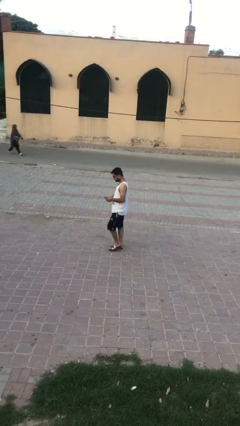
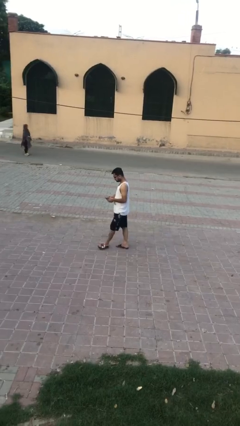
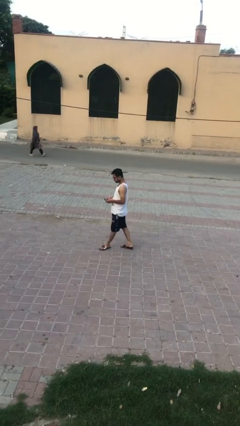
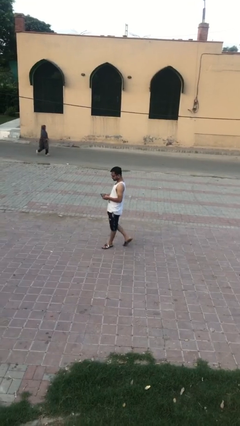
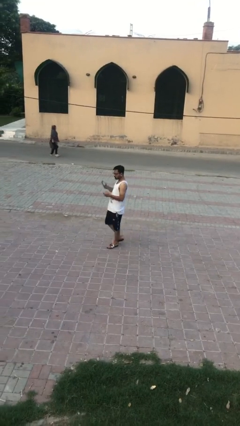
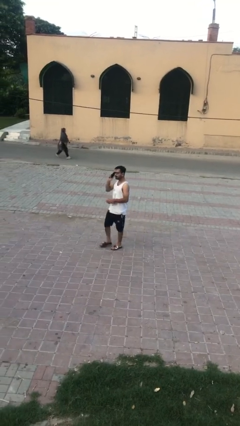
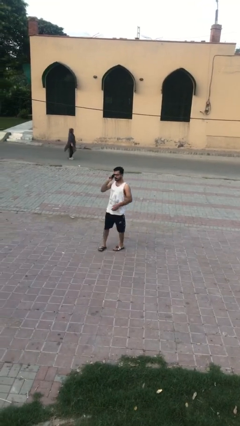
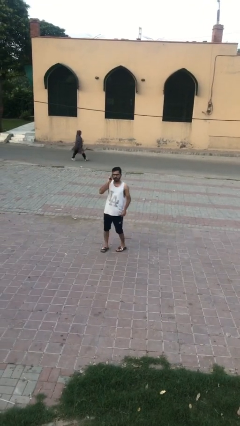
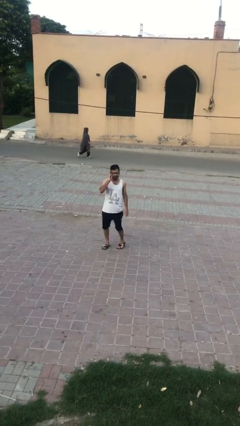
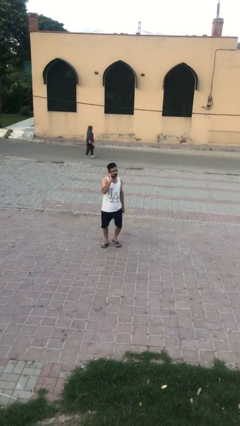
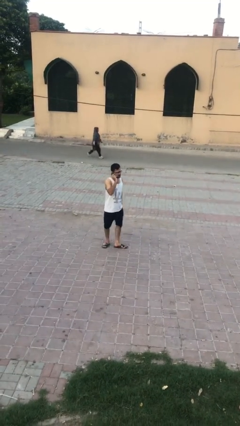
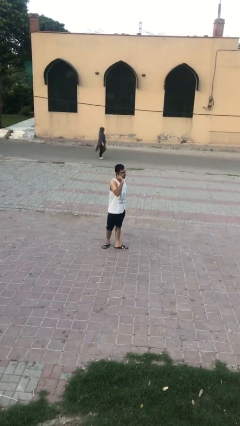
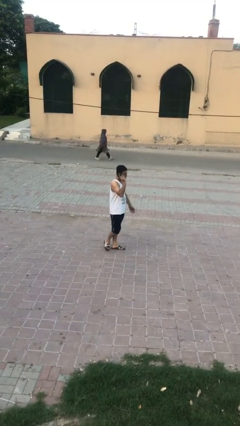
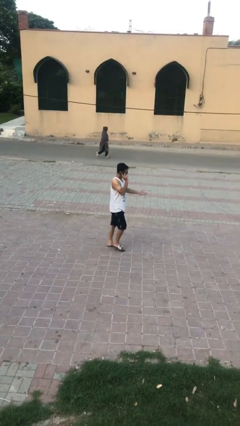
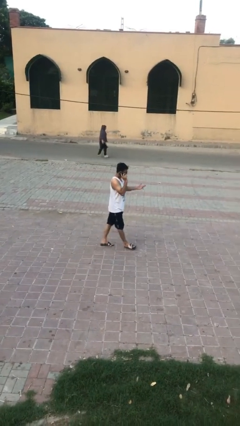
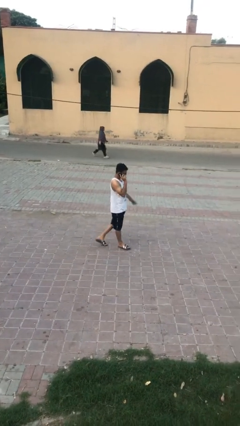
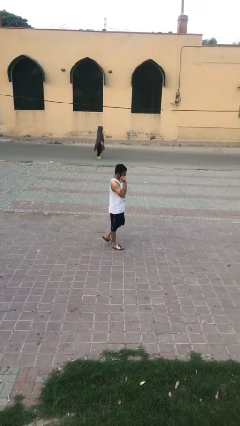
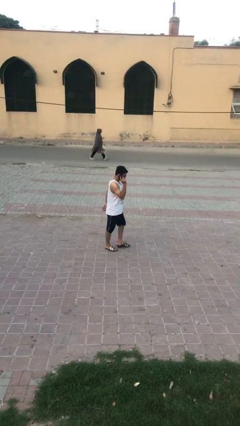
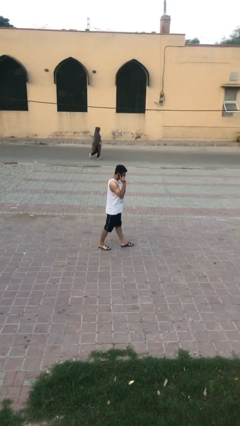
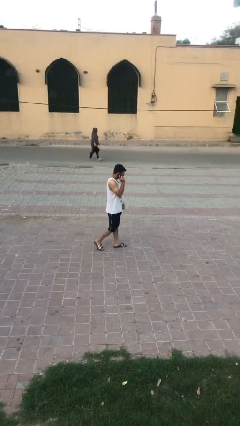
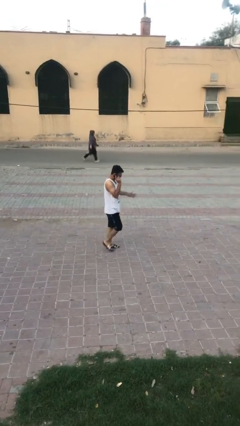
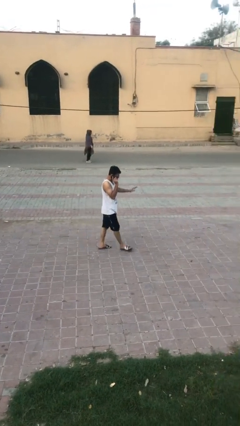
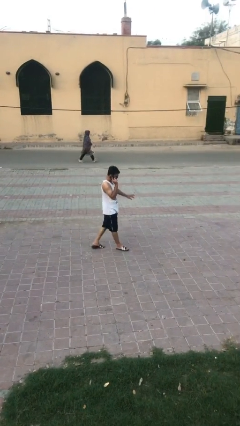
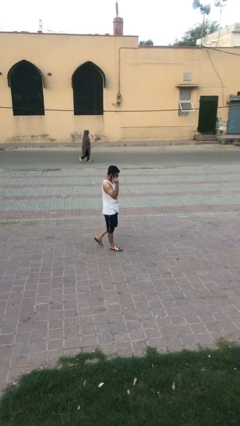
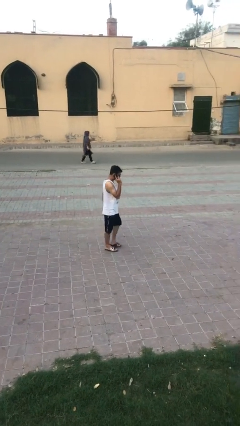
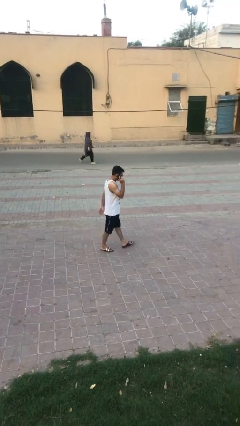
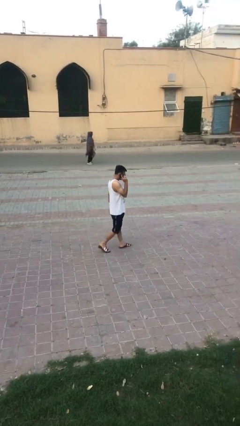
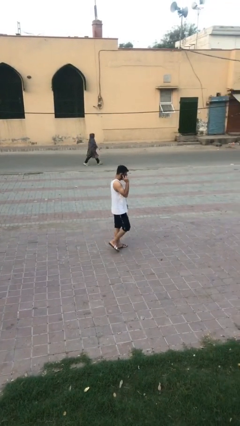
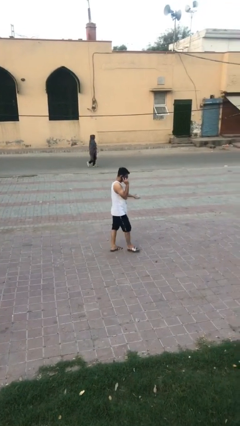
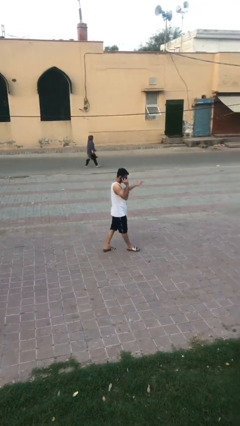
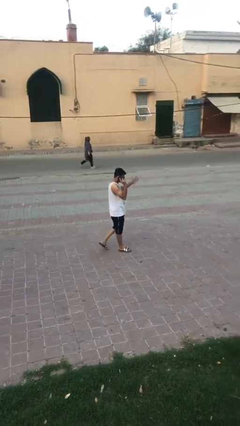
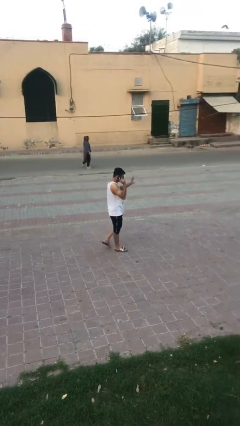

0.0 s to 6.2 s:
person talks on phone

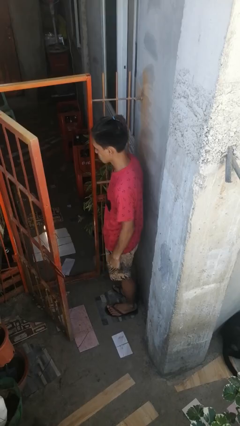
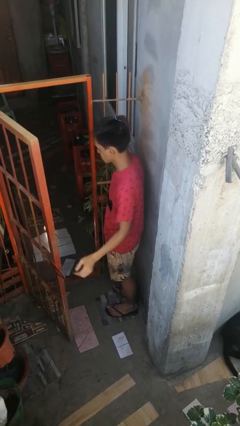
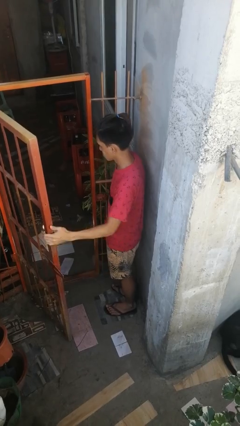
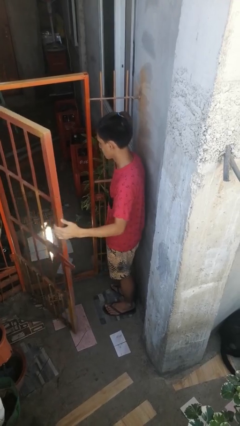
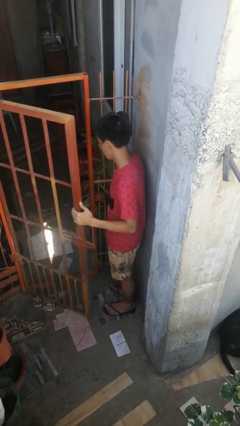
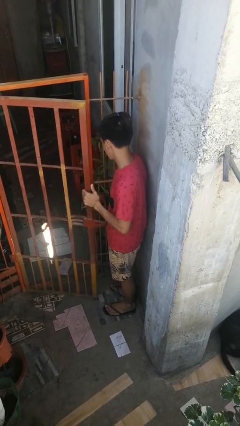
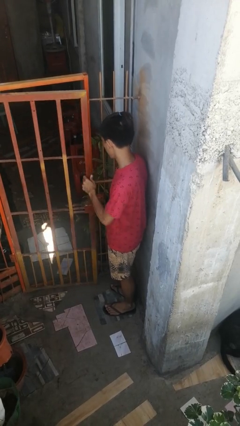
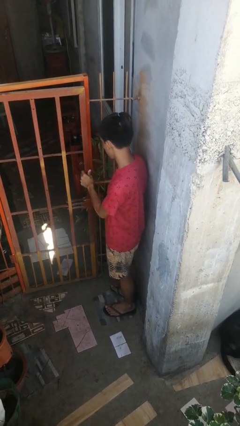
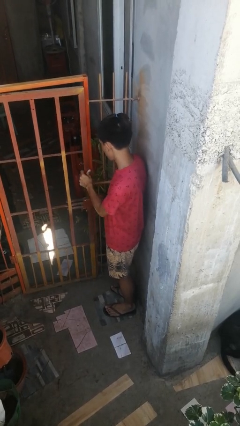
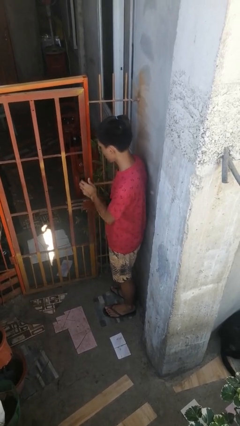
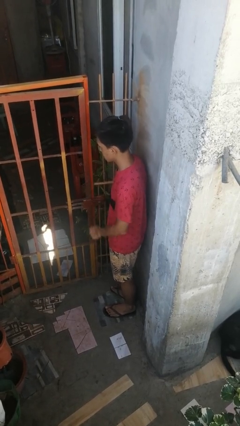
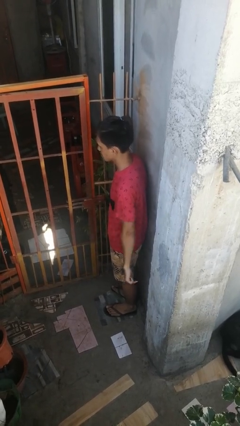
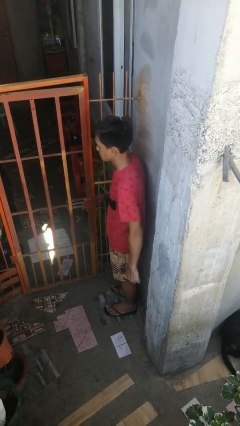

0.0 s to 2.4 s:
person closes gate

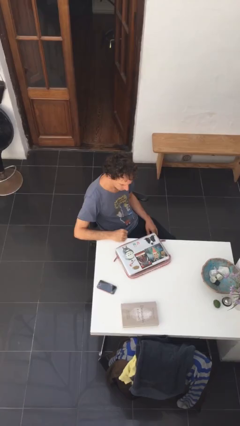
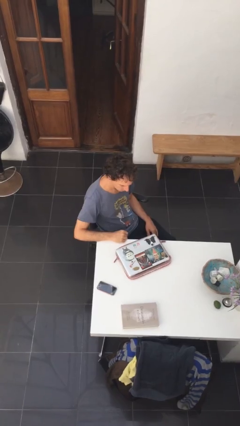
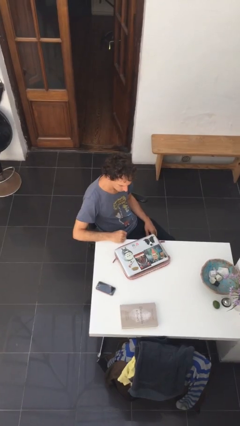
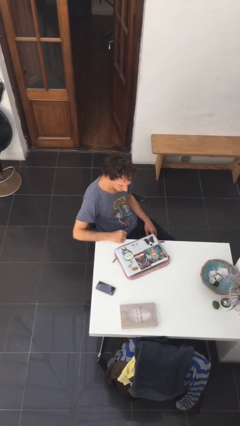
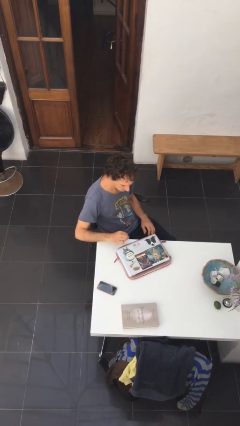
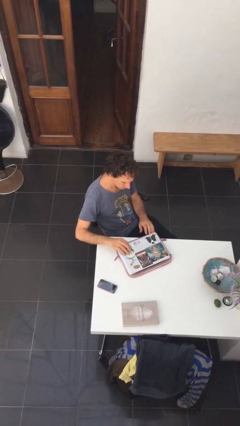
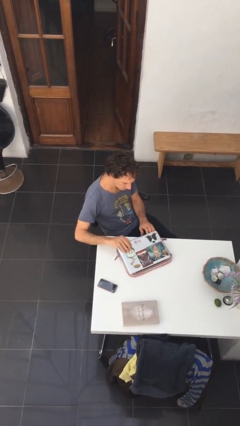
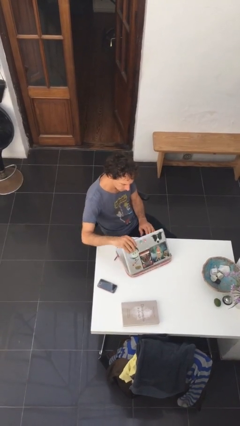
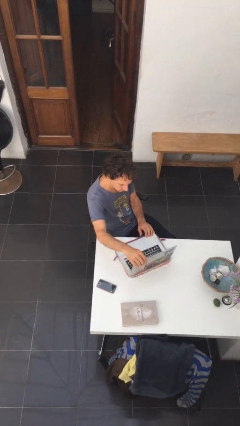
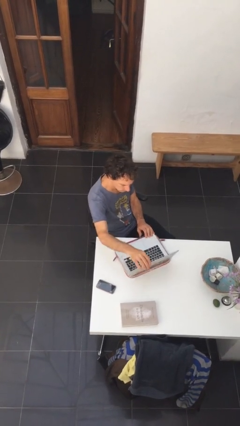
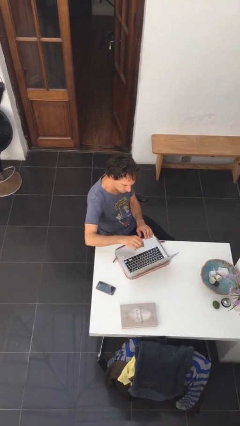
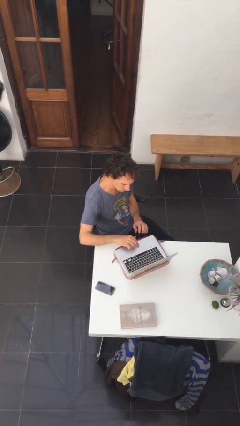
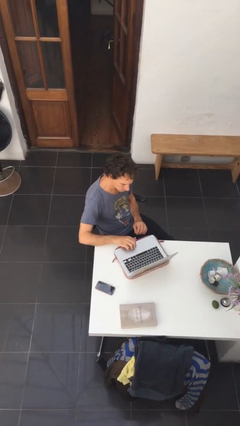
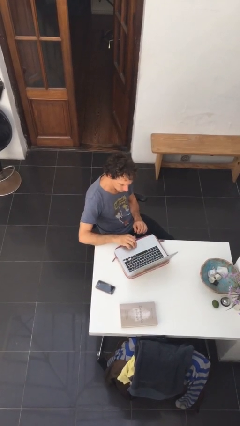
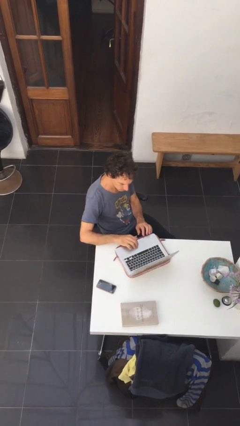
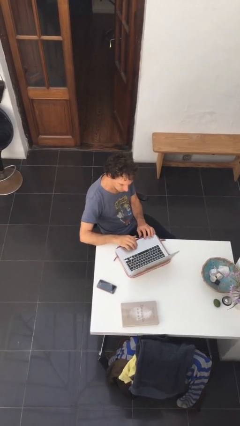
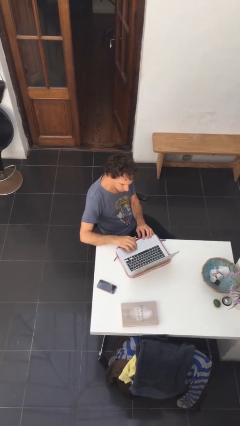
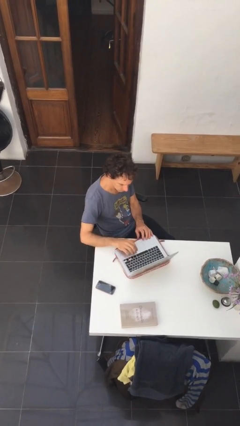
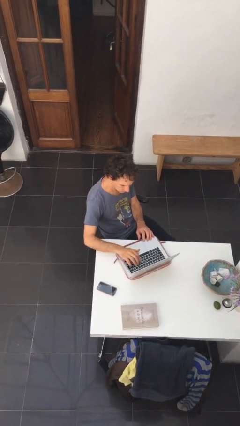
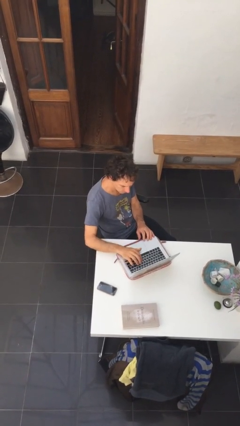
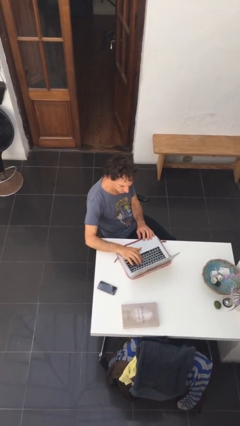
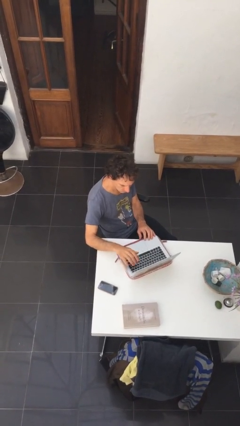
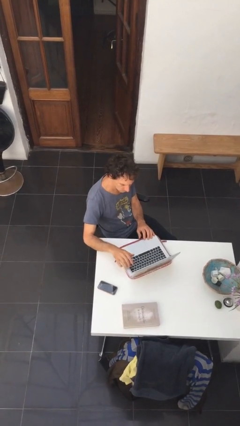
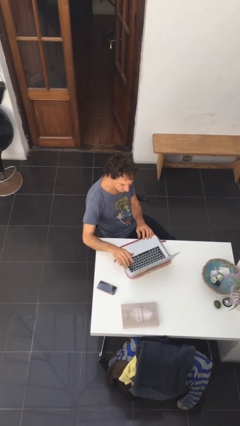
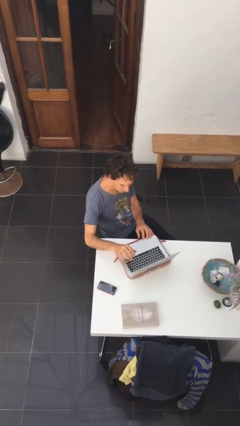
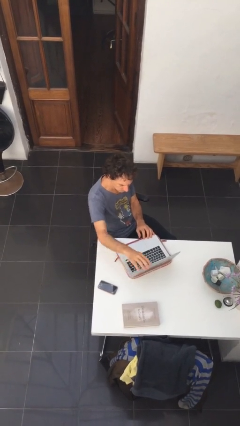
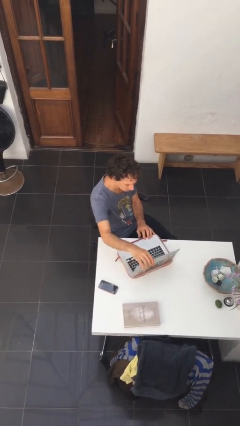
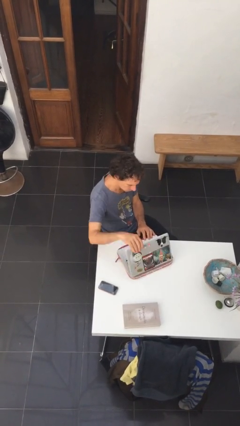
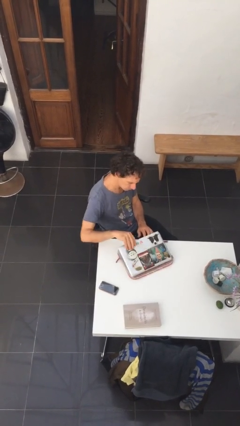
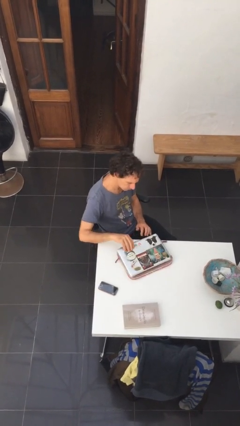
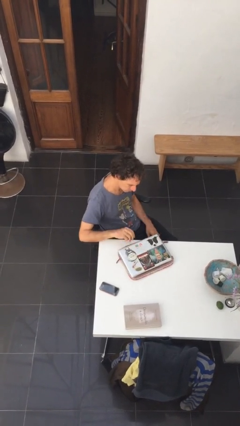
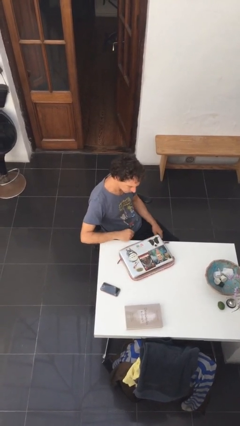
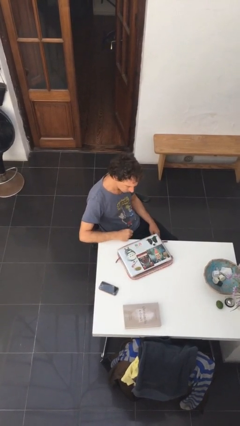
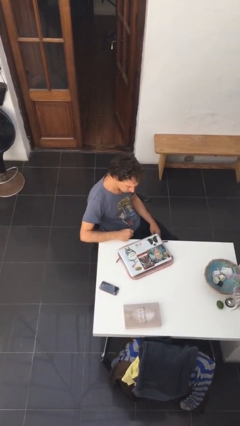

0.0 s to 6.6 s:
person interacts with laptop

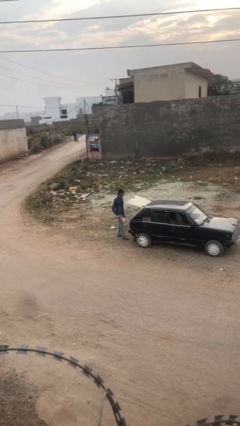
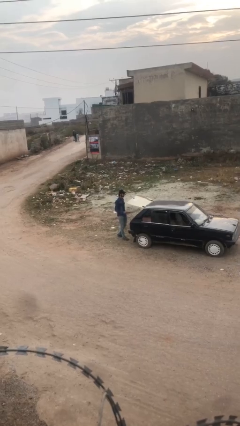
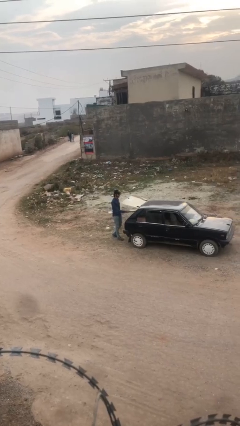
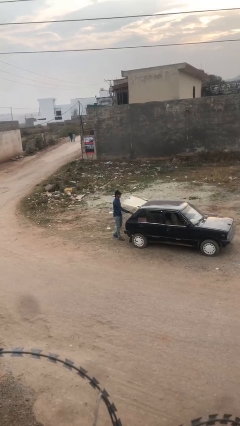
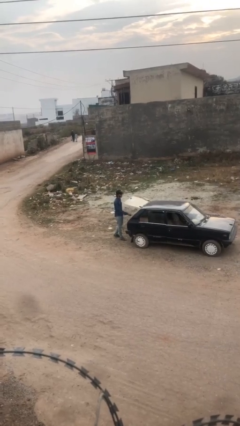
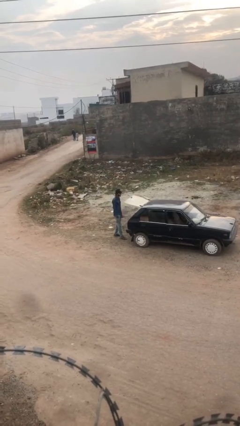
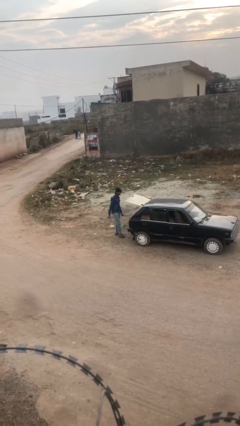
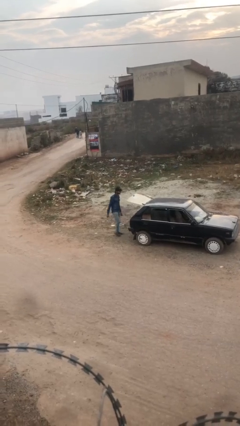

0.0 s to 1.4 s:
person loads car

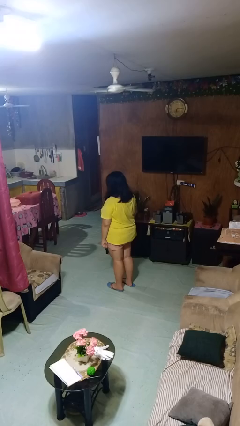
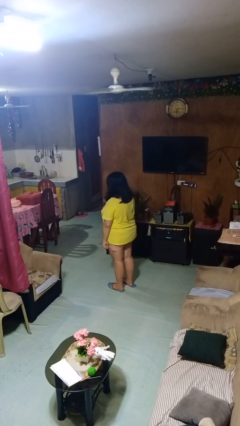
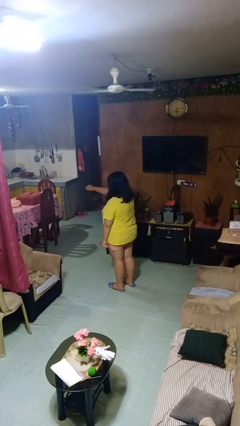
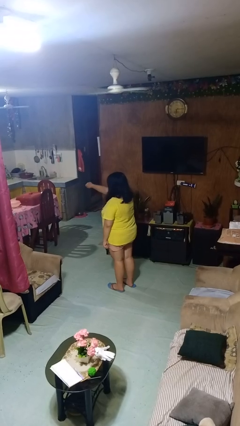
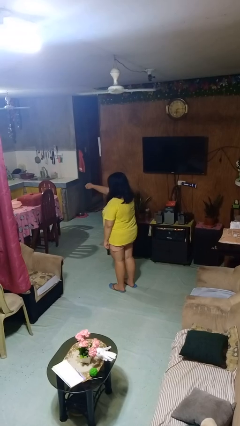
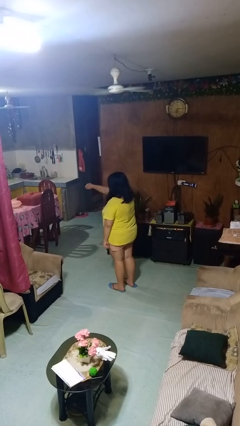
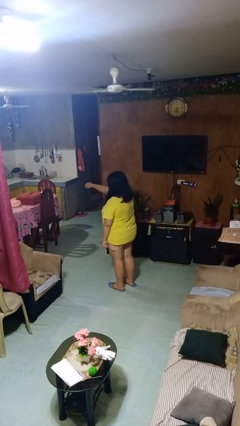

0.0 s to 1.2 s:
person punches
